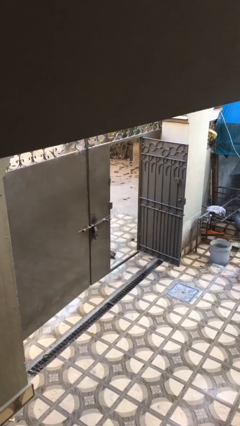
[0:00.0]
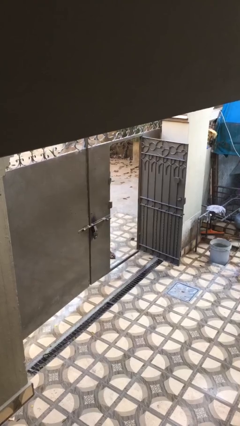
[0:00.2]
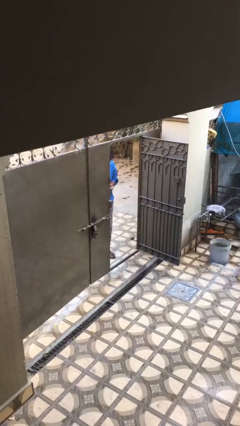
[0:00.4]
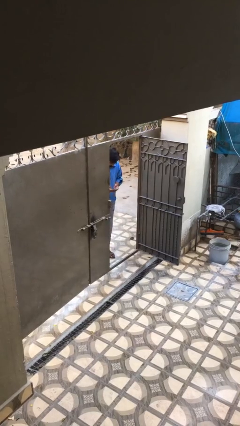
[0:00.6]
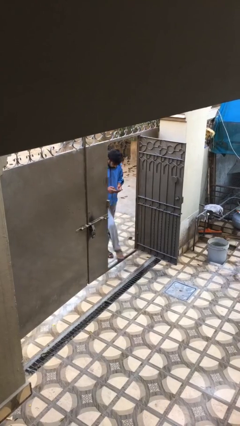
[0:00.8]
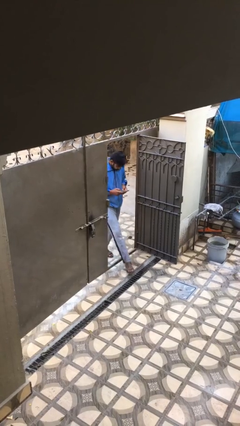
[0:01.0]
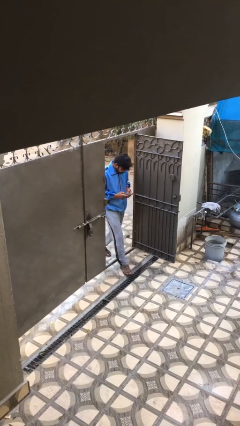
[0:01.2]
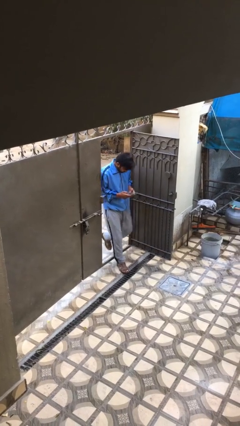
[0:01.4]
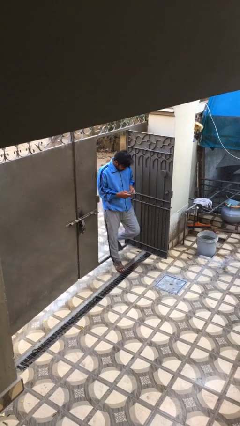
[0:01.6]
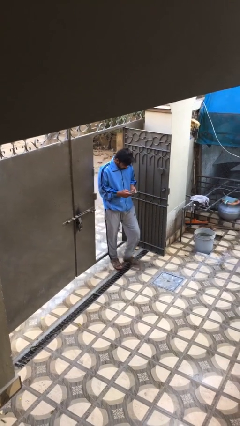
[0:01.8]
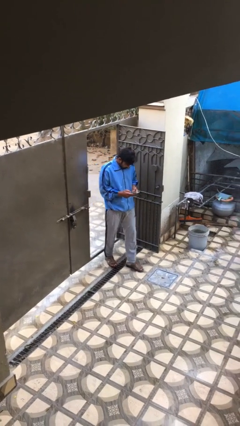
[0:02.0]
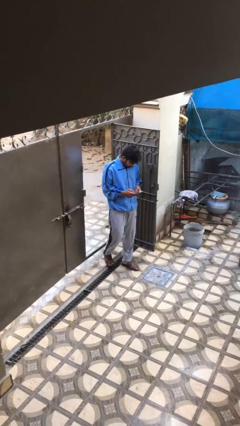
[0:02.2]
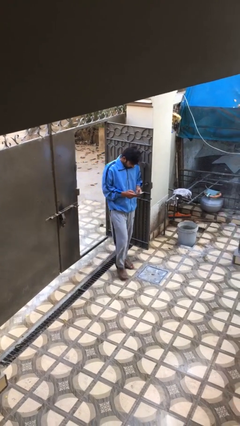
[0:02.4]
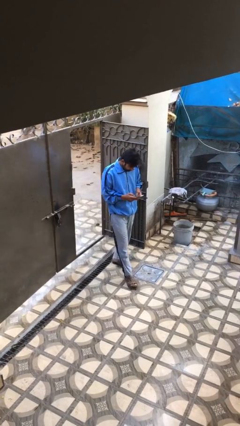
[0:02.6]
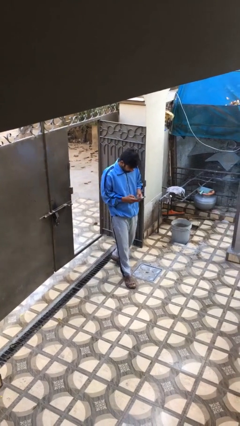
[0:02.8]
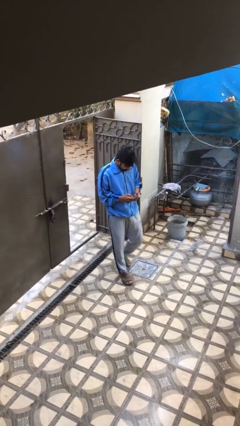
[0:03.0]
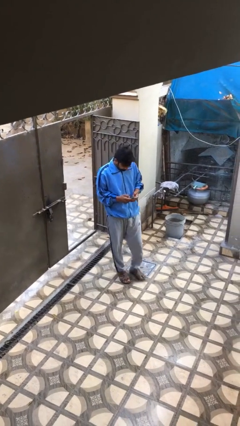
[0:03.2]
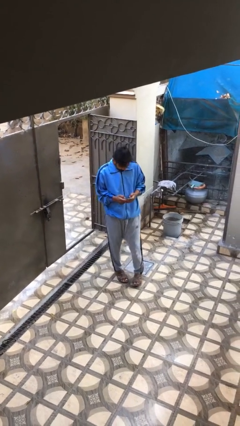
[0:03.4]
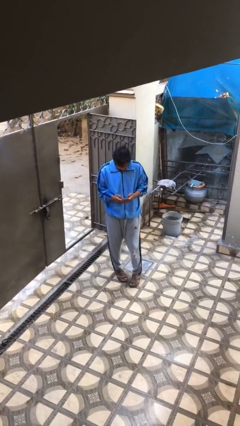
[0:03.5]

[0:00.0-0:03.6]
person enters scene through structure

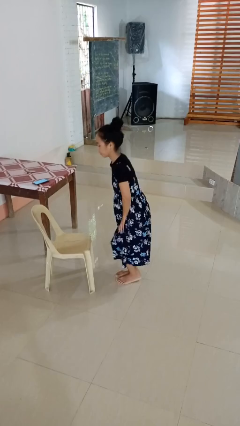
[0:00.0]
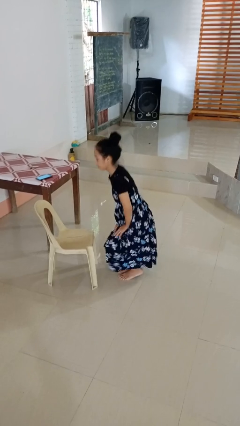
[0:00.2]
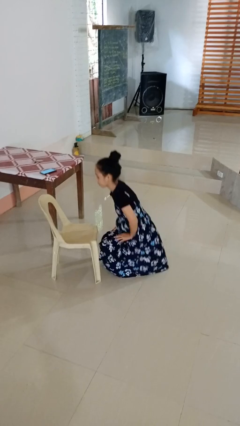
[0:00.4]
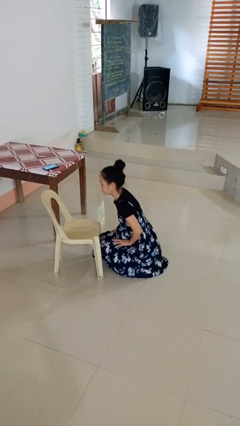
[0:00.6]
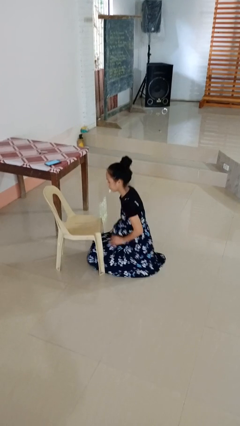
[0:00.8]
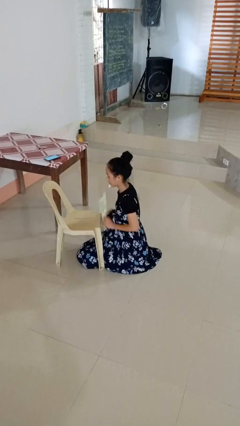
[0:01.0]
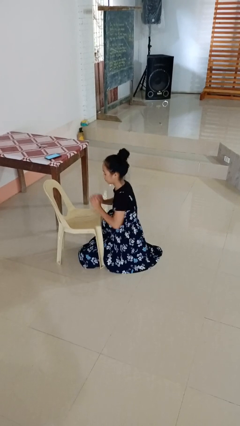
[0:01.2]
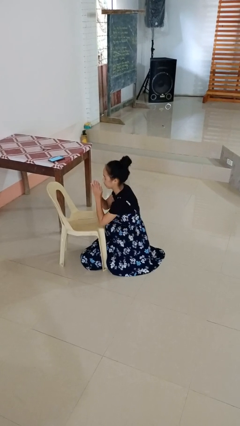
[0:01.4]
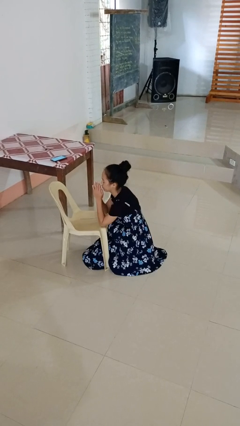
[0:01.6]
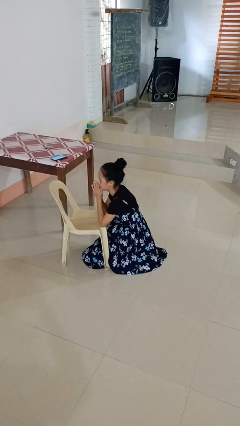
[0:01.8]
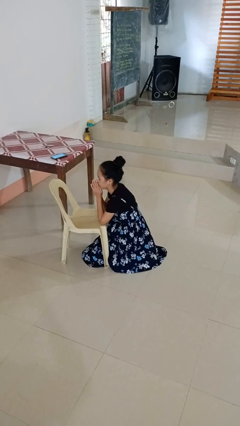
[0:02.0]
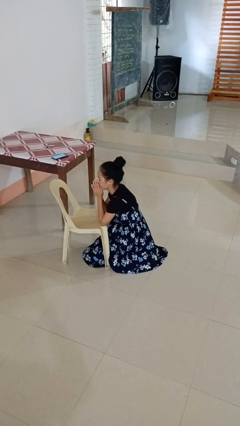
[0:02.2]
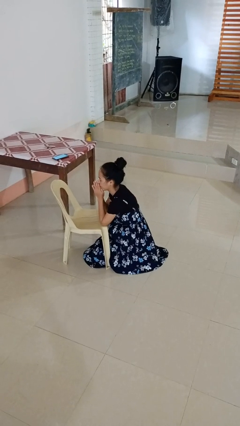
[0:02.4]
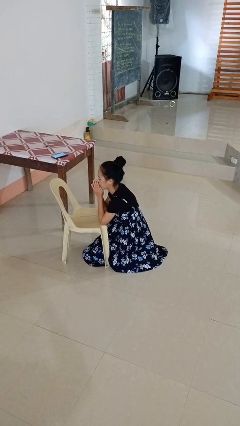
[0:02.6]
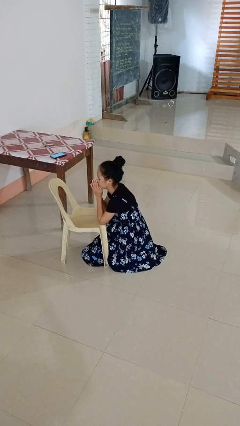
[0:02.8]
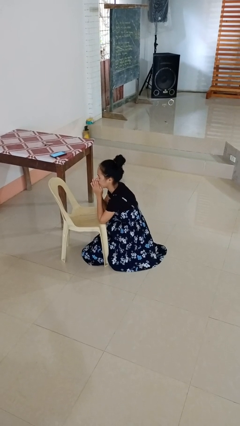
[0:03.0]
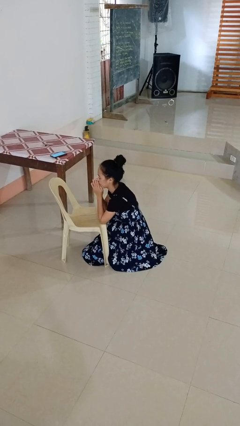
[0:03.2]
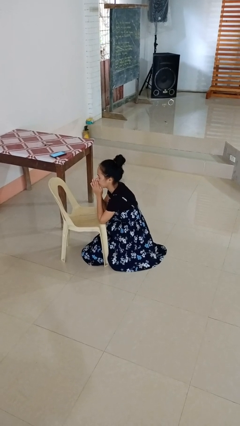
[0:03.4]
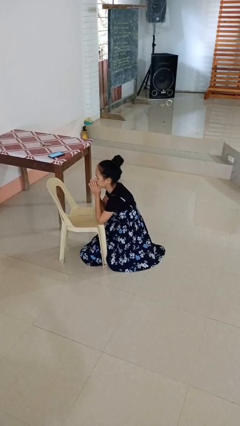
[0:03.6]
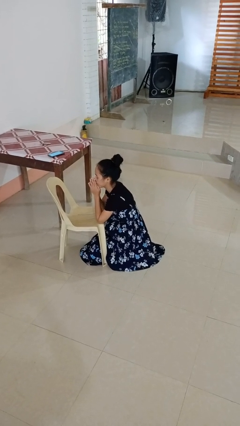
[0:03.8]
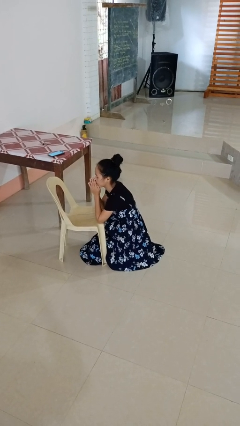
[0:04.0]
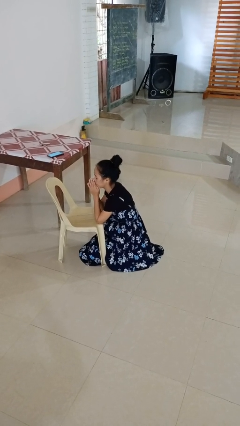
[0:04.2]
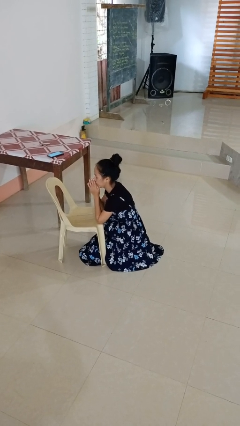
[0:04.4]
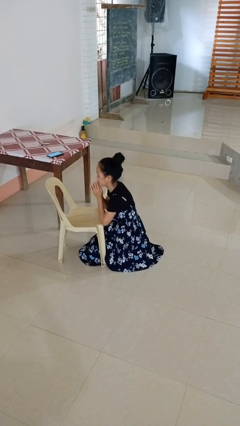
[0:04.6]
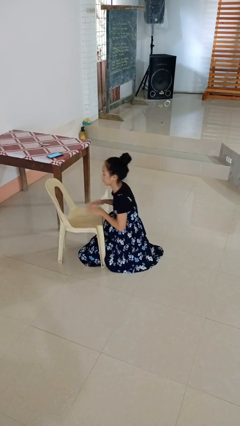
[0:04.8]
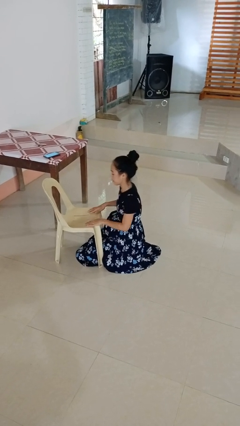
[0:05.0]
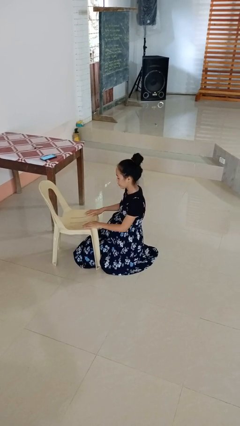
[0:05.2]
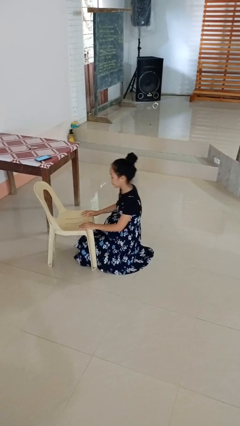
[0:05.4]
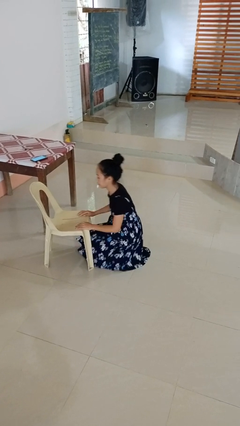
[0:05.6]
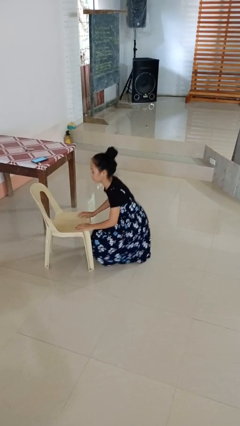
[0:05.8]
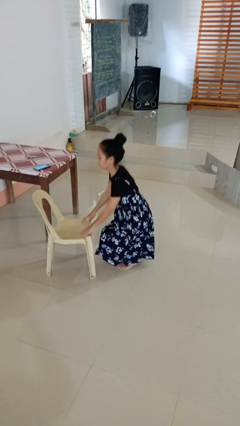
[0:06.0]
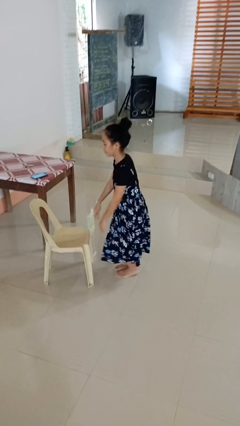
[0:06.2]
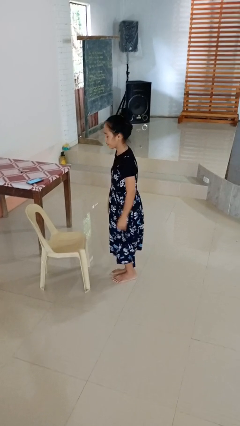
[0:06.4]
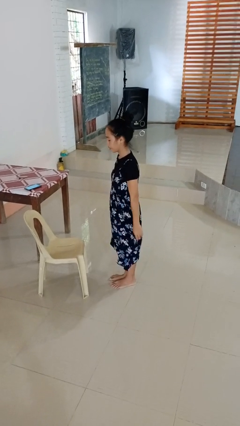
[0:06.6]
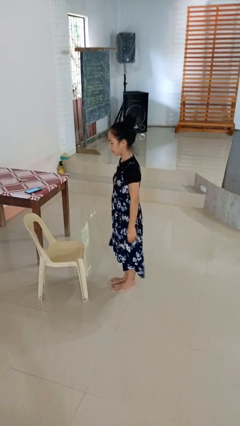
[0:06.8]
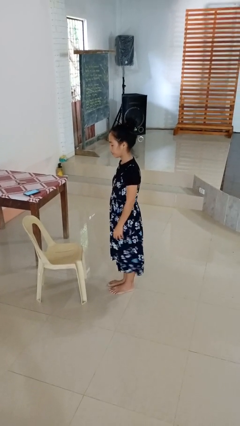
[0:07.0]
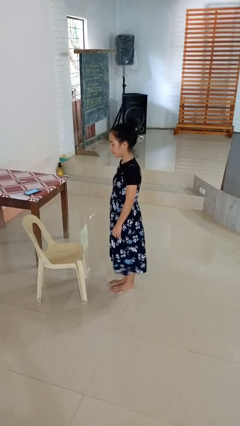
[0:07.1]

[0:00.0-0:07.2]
person prays

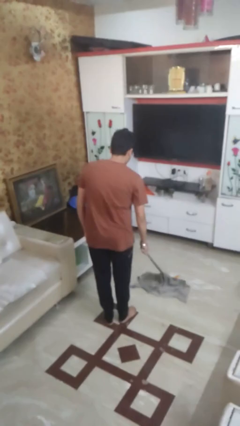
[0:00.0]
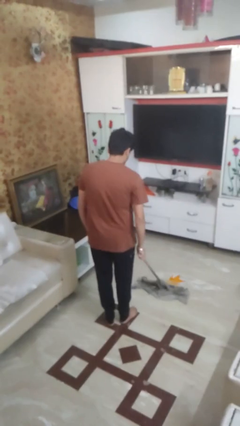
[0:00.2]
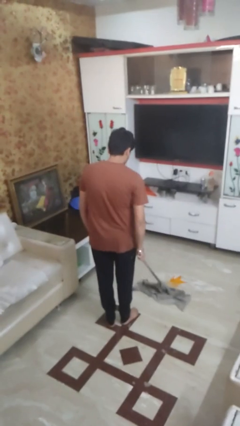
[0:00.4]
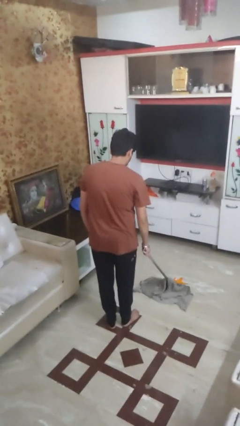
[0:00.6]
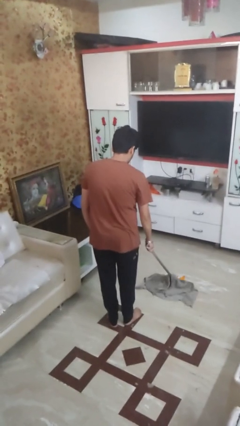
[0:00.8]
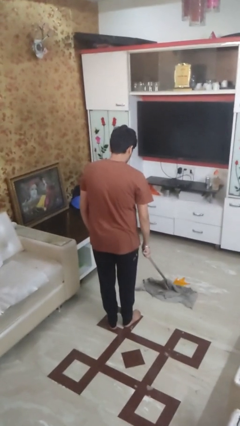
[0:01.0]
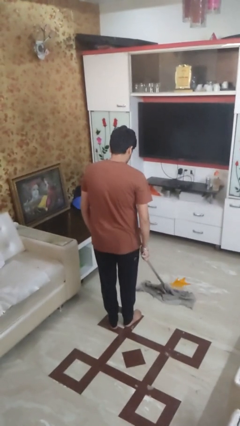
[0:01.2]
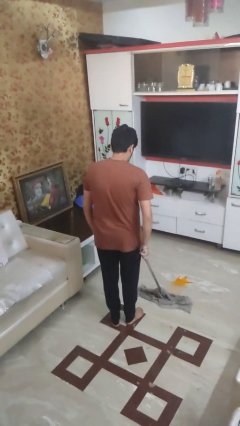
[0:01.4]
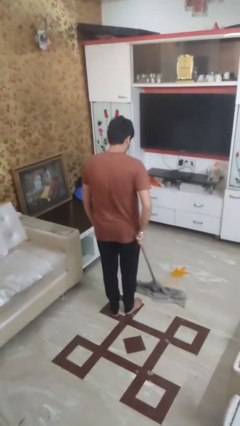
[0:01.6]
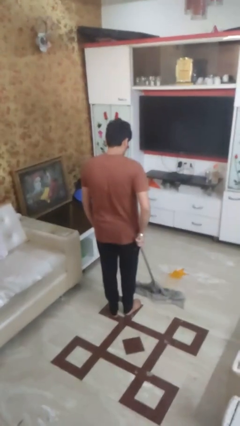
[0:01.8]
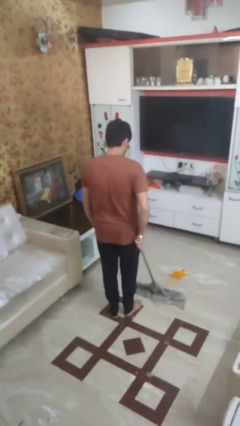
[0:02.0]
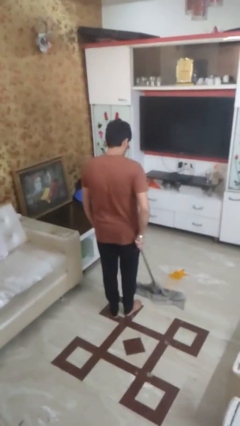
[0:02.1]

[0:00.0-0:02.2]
person mops

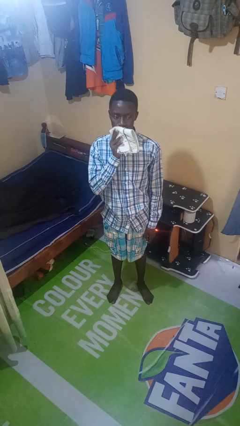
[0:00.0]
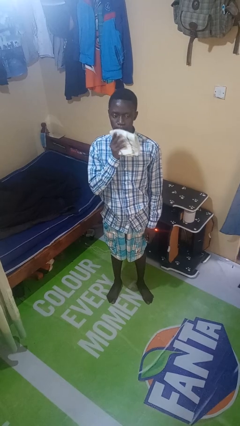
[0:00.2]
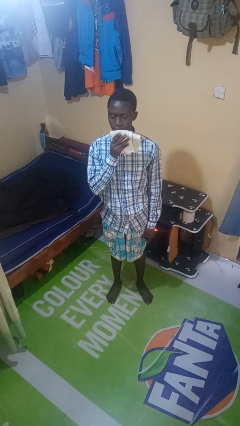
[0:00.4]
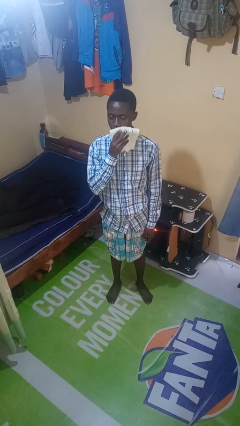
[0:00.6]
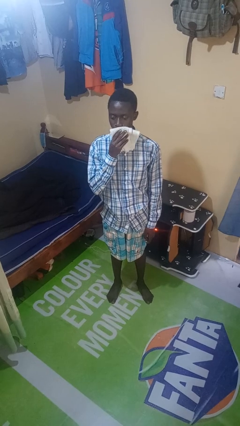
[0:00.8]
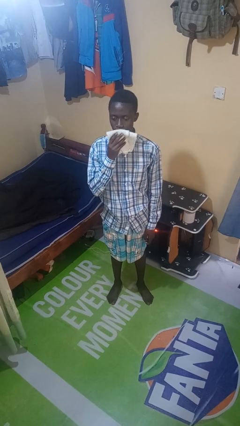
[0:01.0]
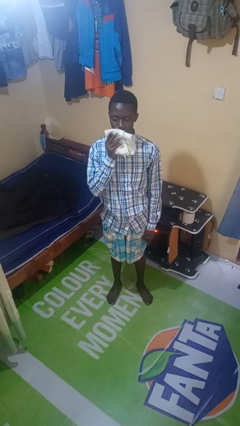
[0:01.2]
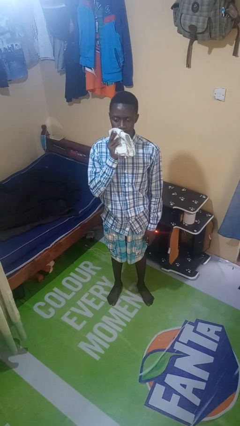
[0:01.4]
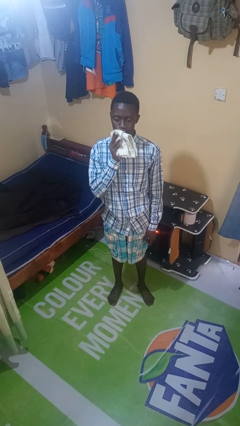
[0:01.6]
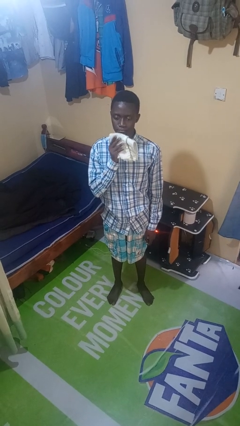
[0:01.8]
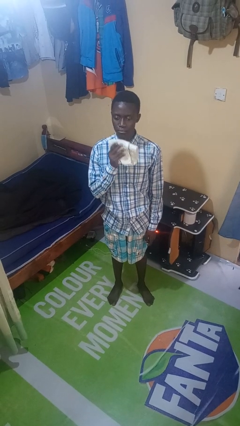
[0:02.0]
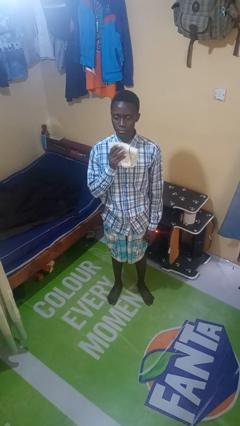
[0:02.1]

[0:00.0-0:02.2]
person wipes mouth with napkin

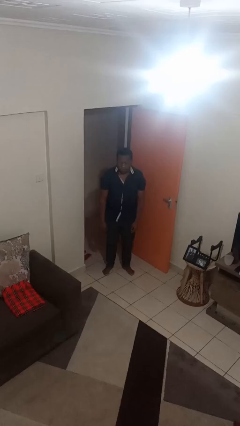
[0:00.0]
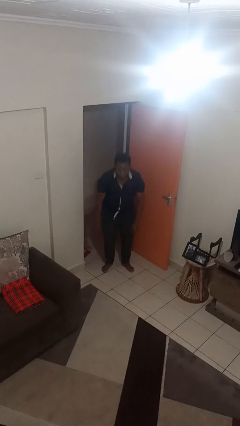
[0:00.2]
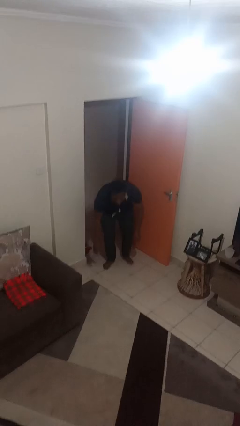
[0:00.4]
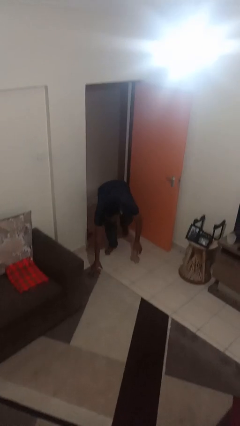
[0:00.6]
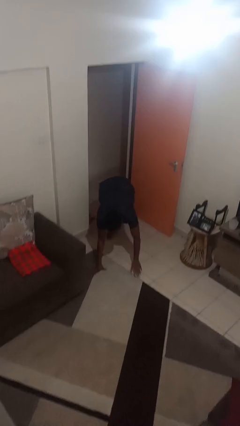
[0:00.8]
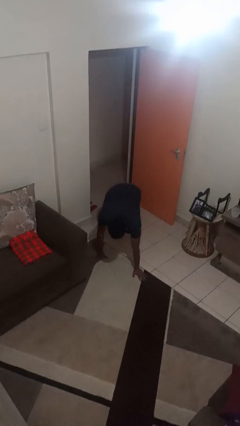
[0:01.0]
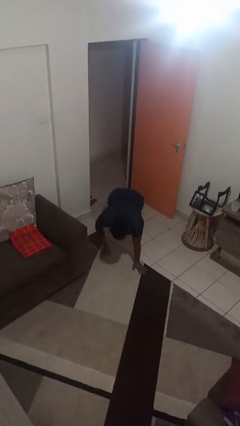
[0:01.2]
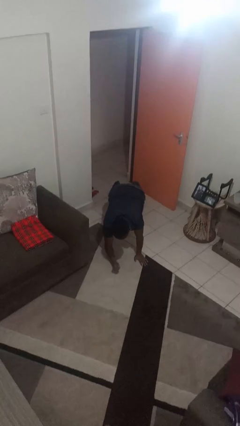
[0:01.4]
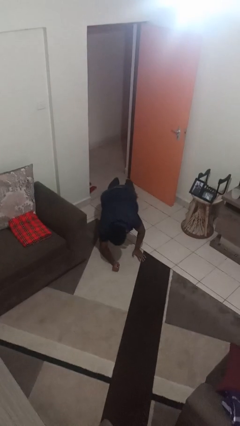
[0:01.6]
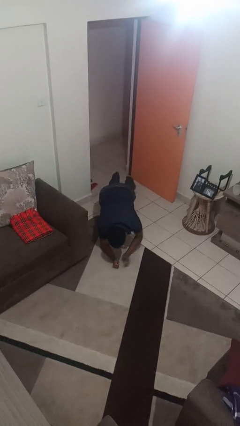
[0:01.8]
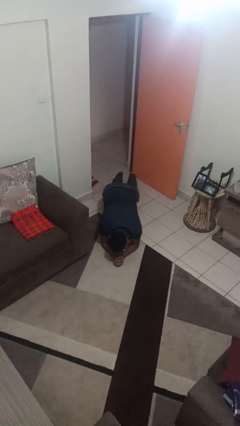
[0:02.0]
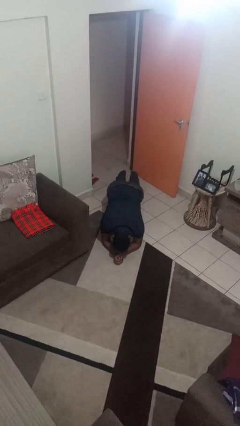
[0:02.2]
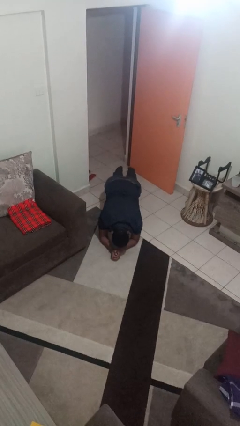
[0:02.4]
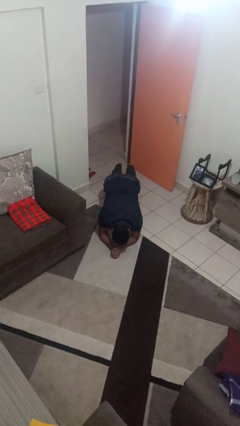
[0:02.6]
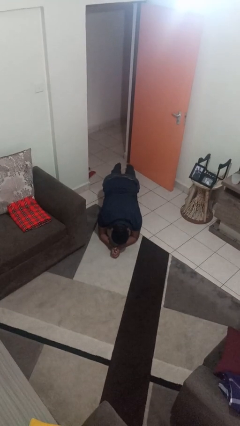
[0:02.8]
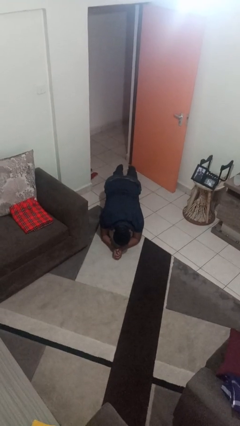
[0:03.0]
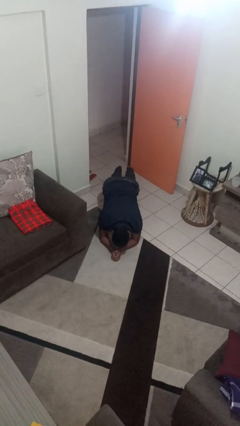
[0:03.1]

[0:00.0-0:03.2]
person exercises with plank
